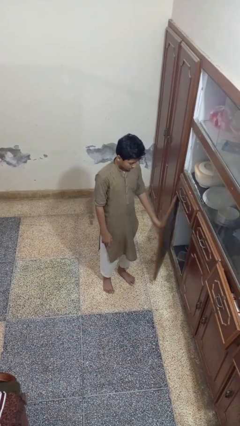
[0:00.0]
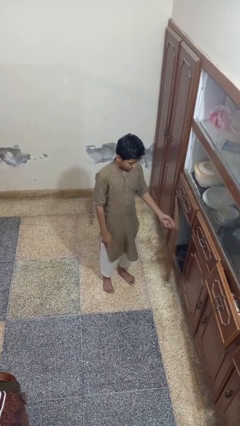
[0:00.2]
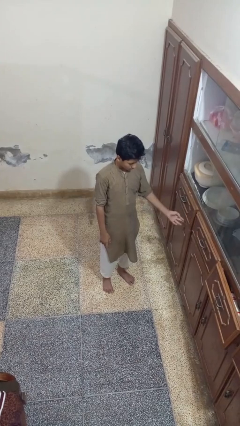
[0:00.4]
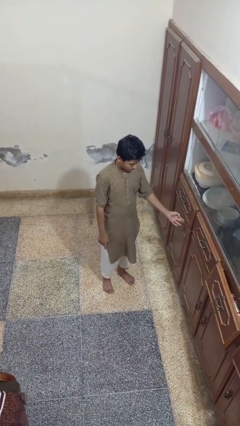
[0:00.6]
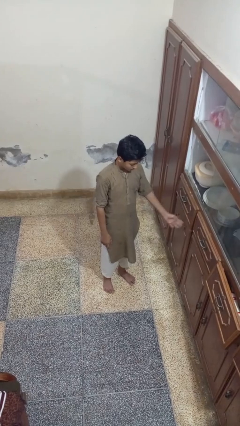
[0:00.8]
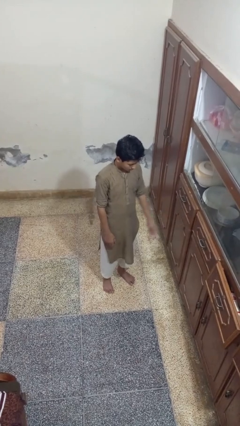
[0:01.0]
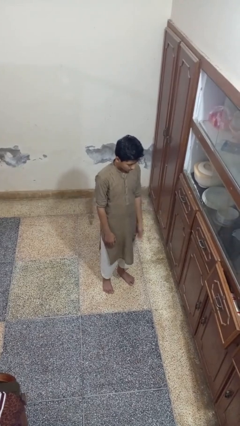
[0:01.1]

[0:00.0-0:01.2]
person closes cabinet

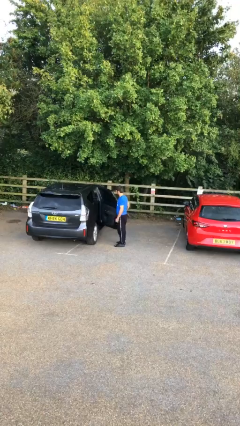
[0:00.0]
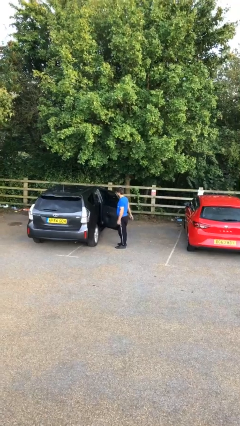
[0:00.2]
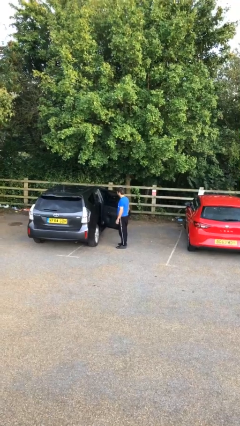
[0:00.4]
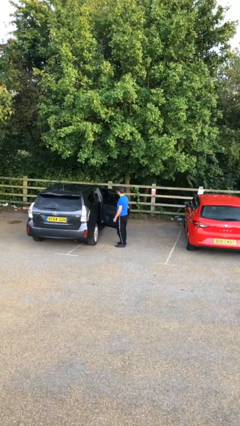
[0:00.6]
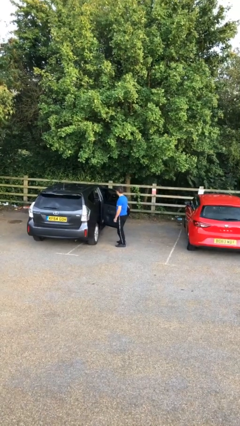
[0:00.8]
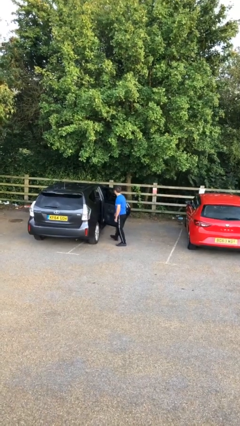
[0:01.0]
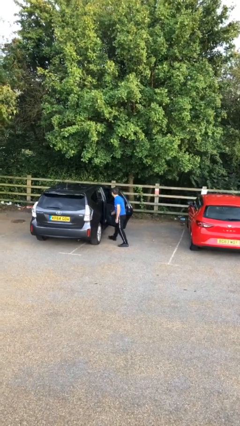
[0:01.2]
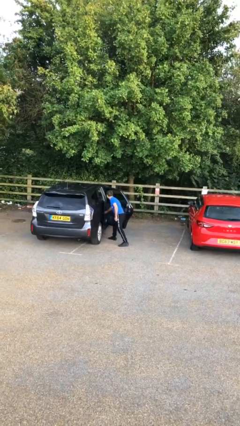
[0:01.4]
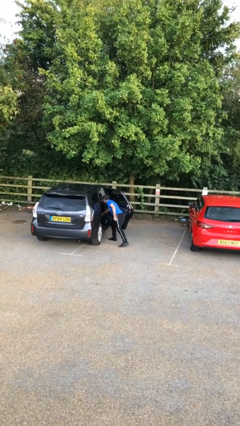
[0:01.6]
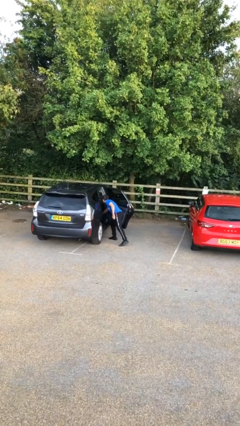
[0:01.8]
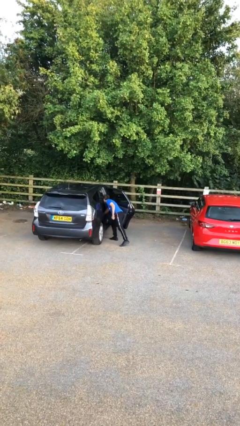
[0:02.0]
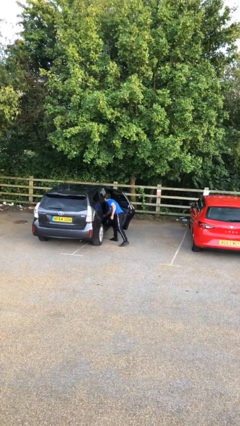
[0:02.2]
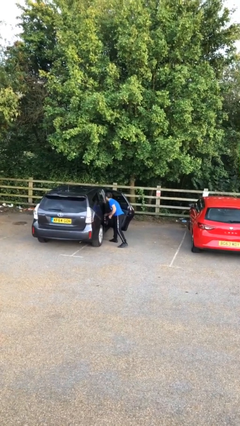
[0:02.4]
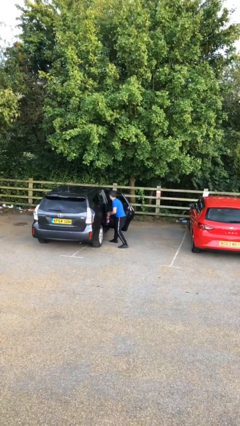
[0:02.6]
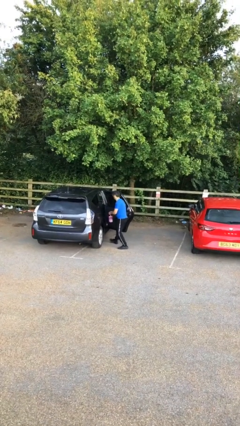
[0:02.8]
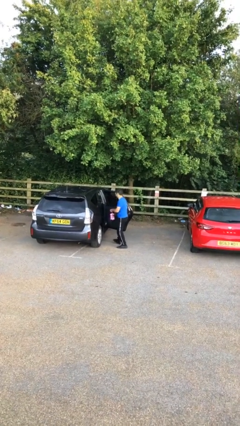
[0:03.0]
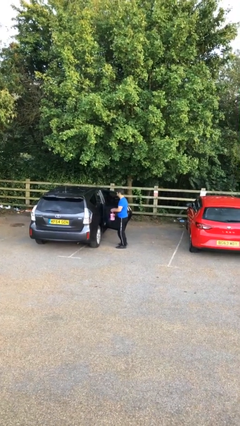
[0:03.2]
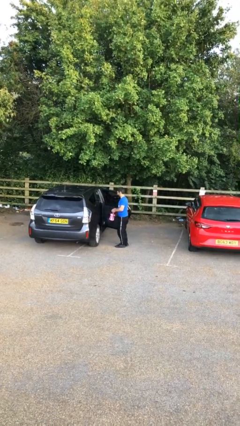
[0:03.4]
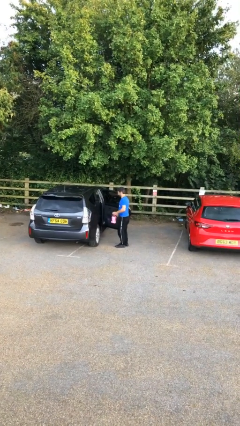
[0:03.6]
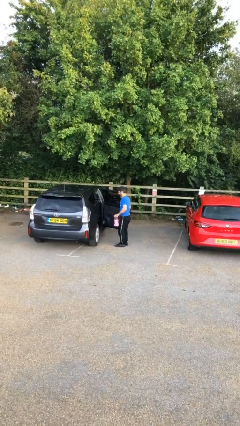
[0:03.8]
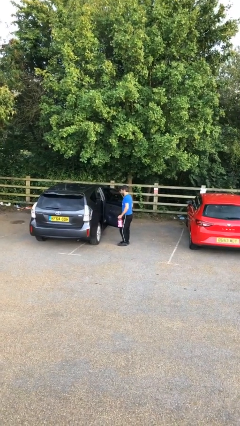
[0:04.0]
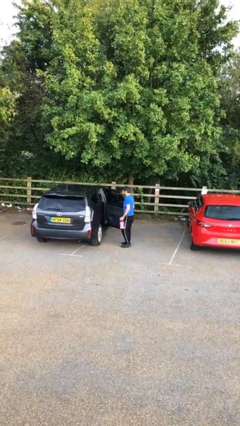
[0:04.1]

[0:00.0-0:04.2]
person unloads car

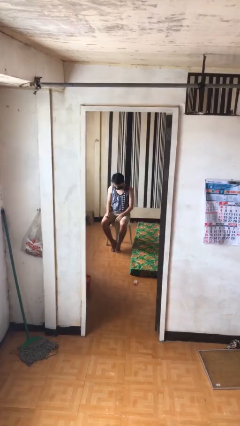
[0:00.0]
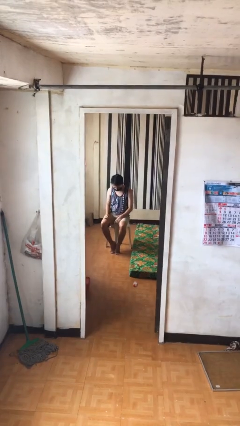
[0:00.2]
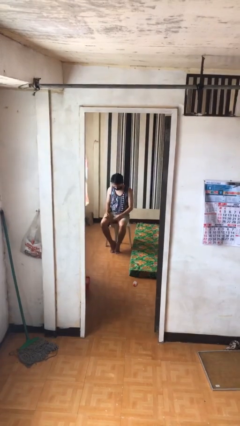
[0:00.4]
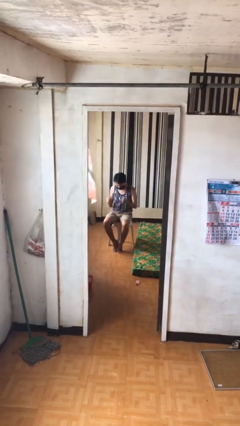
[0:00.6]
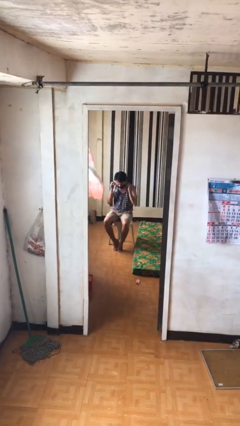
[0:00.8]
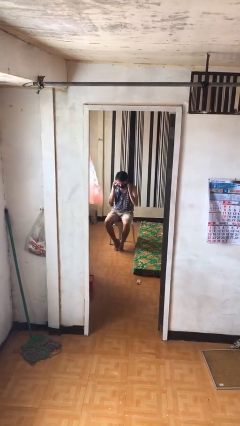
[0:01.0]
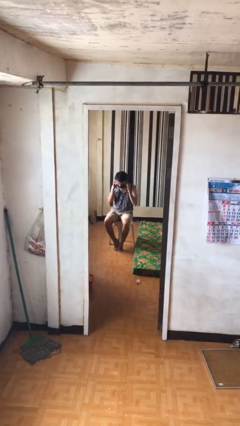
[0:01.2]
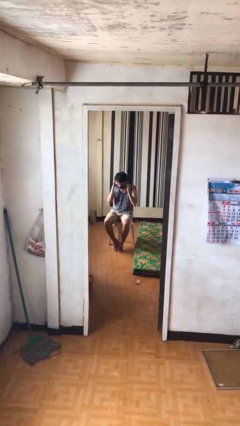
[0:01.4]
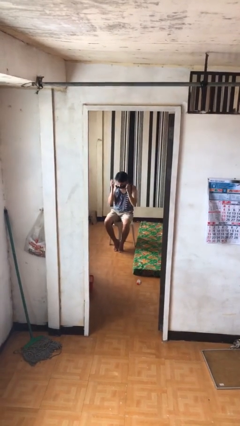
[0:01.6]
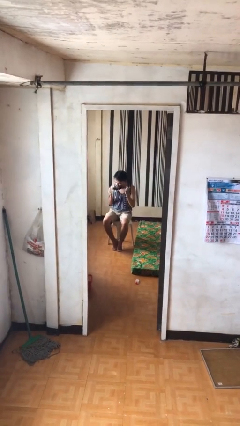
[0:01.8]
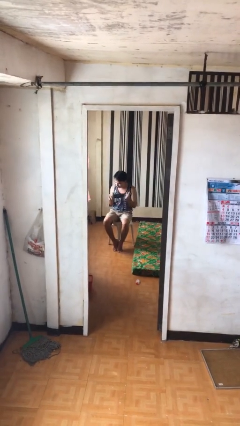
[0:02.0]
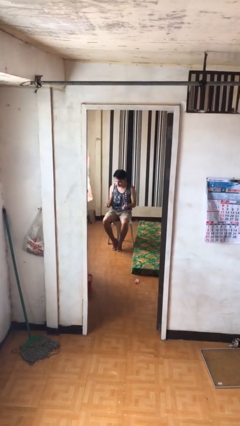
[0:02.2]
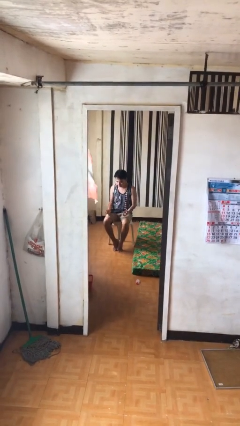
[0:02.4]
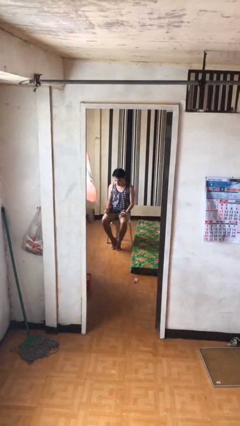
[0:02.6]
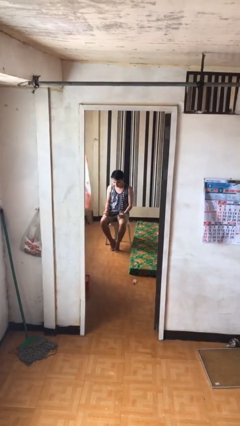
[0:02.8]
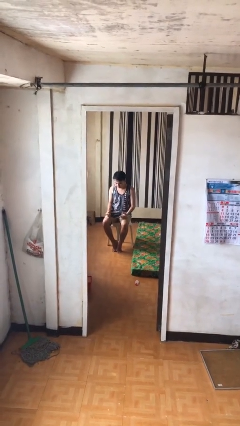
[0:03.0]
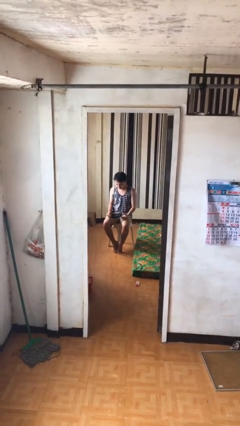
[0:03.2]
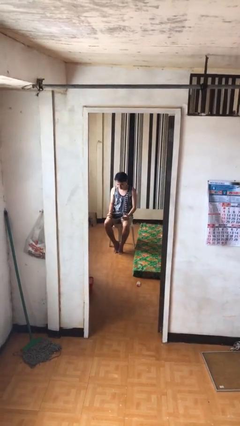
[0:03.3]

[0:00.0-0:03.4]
person takes off facemask

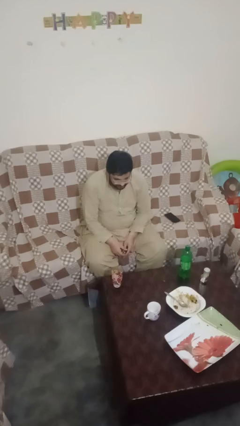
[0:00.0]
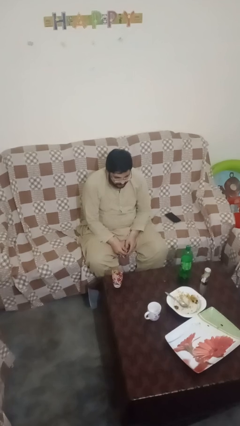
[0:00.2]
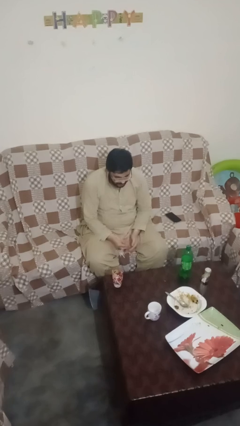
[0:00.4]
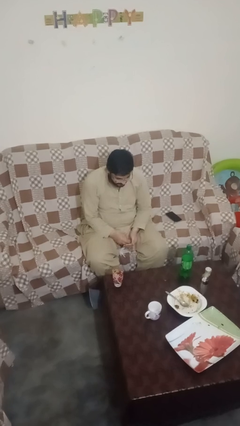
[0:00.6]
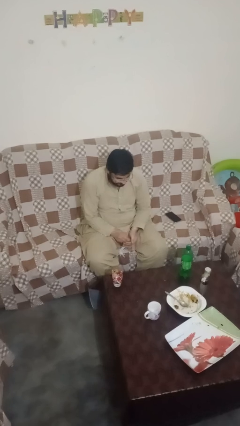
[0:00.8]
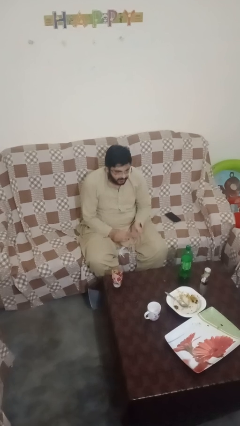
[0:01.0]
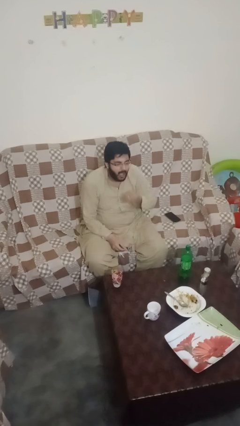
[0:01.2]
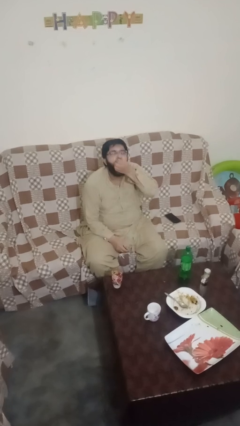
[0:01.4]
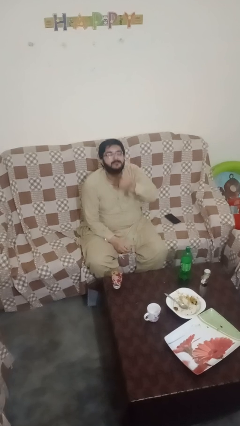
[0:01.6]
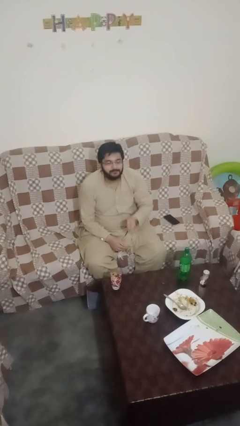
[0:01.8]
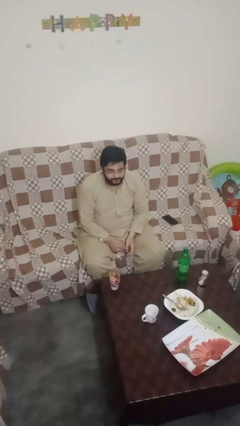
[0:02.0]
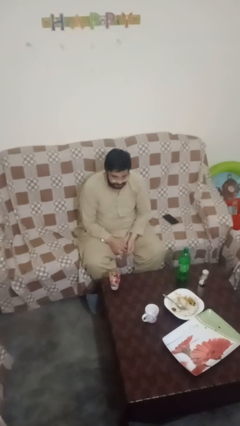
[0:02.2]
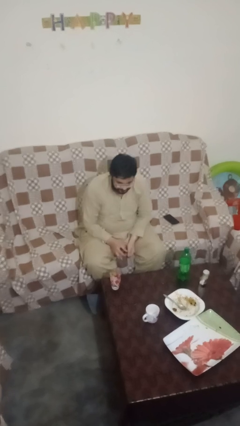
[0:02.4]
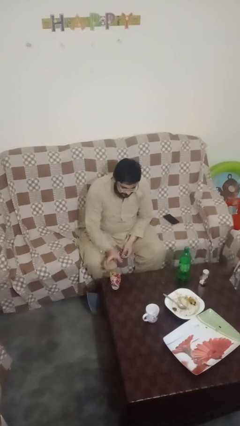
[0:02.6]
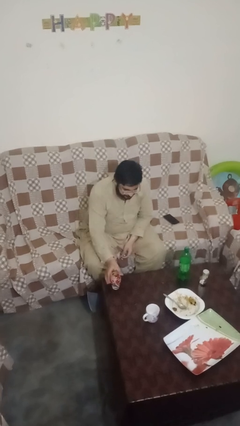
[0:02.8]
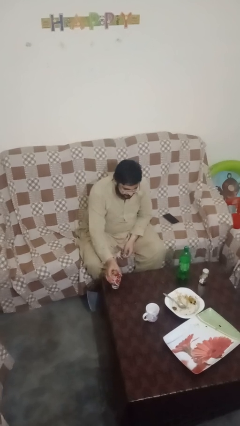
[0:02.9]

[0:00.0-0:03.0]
person takes medicine pills

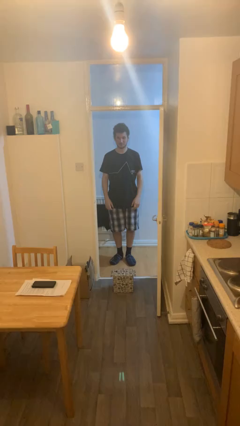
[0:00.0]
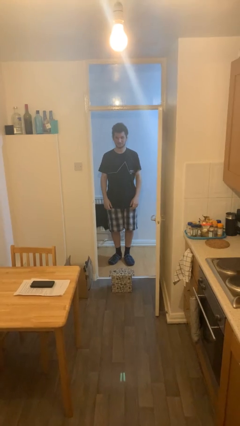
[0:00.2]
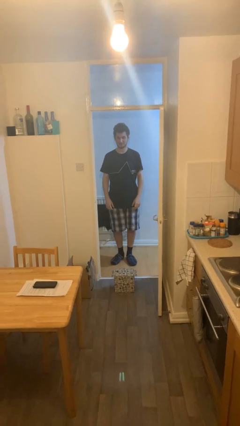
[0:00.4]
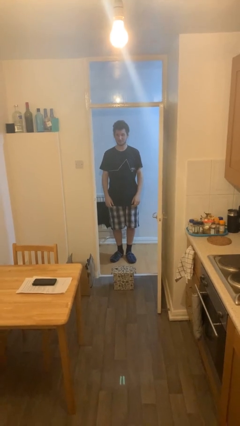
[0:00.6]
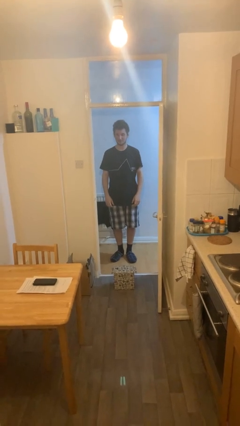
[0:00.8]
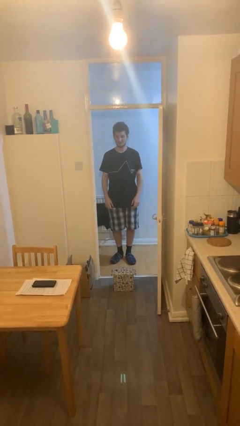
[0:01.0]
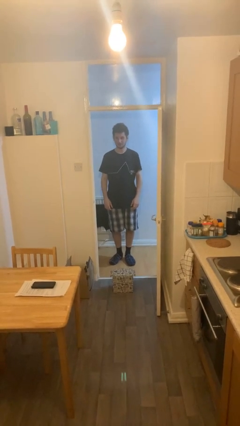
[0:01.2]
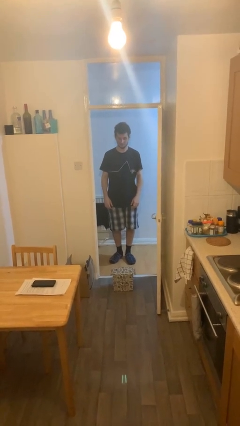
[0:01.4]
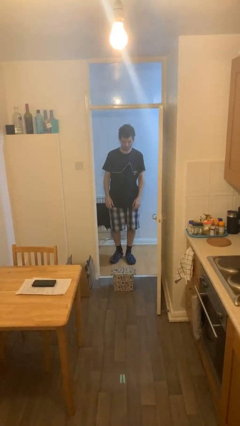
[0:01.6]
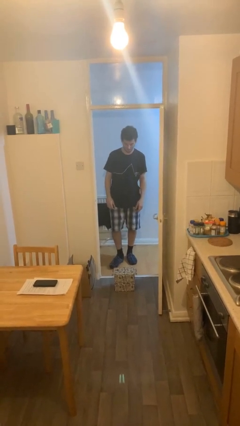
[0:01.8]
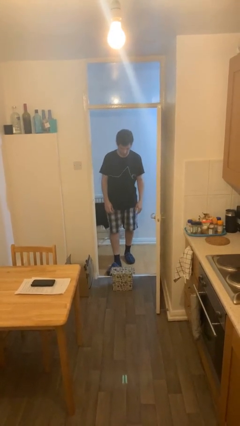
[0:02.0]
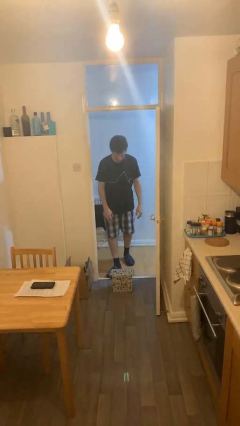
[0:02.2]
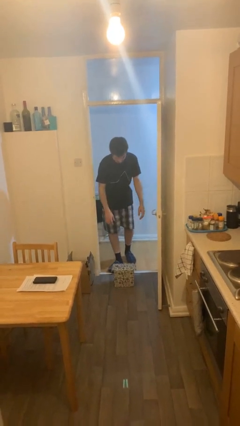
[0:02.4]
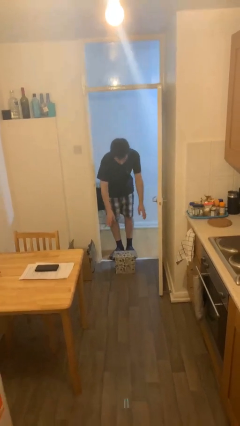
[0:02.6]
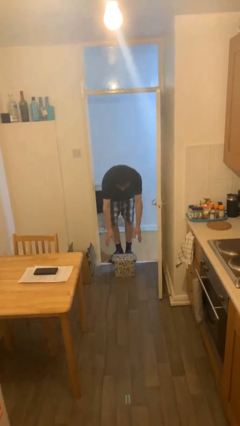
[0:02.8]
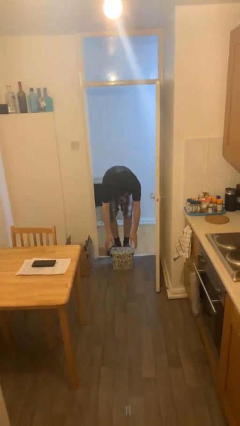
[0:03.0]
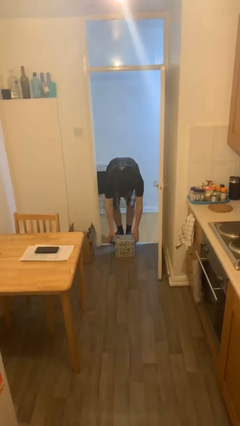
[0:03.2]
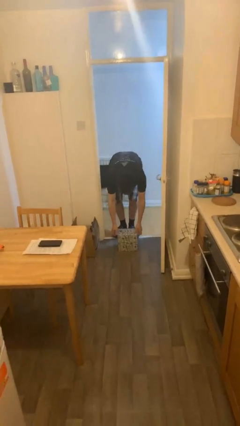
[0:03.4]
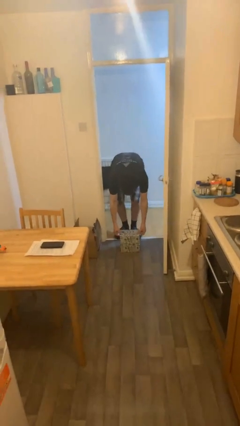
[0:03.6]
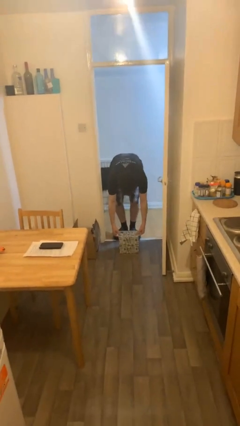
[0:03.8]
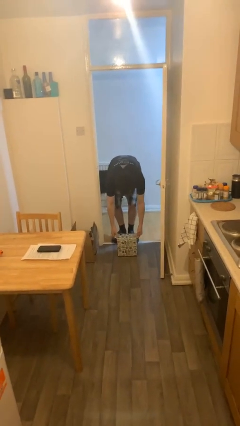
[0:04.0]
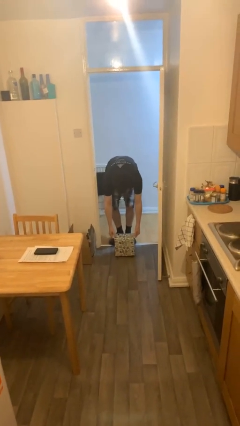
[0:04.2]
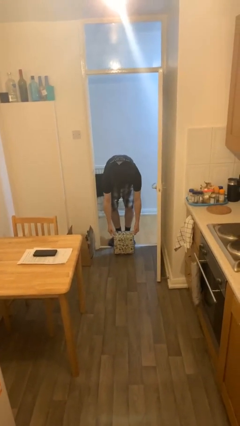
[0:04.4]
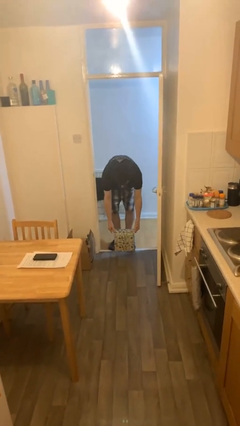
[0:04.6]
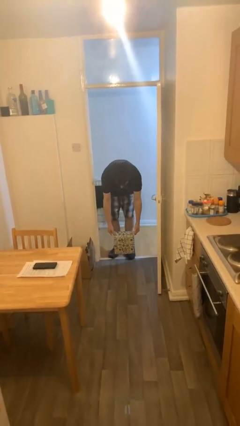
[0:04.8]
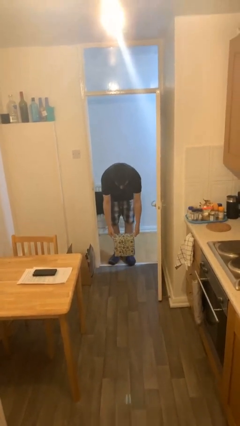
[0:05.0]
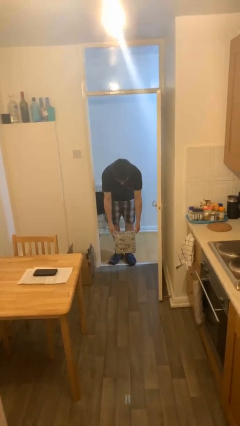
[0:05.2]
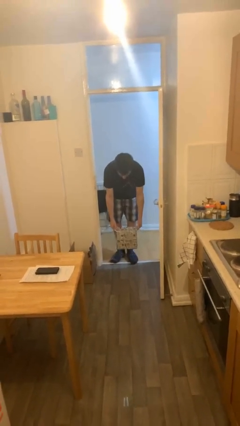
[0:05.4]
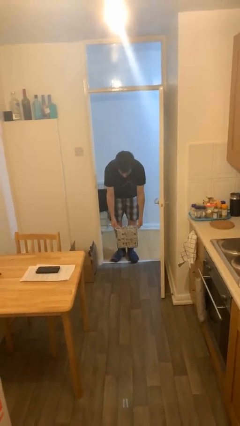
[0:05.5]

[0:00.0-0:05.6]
person picks up object from floor

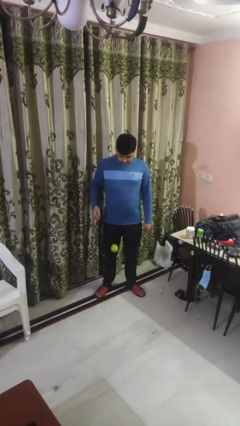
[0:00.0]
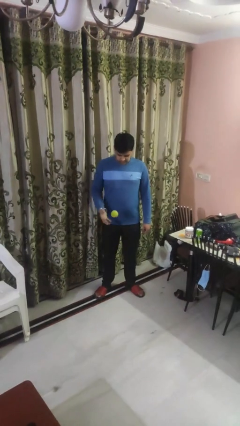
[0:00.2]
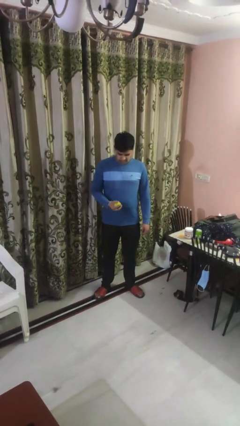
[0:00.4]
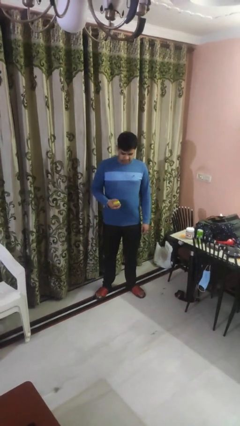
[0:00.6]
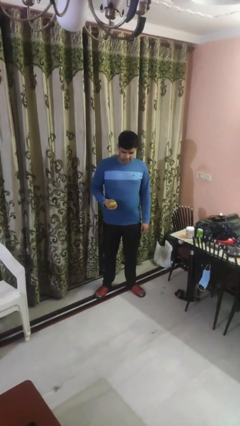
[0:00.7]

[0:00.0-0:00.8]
person bounces ball on floor
